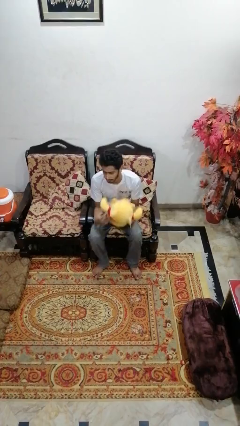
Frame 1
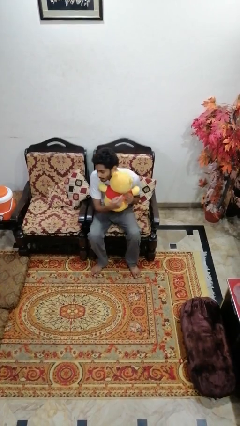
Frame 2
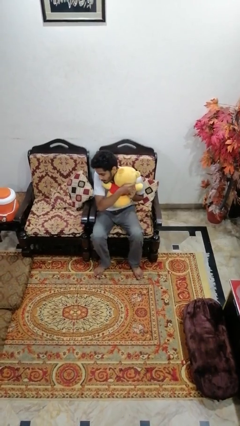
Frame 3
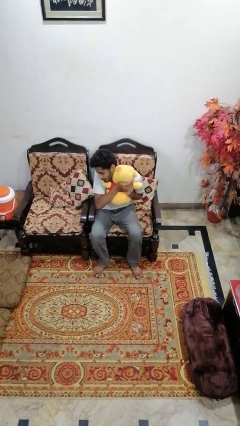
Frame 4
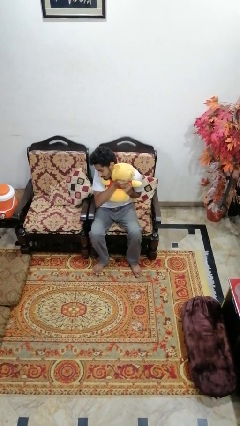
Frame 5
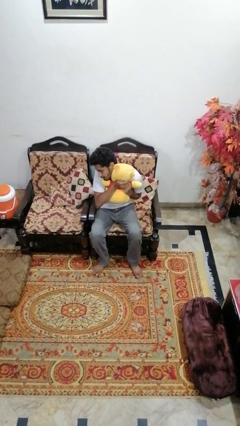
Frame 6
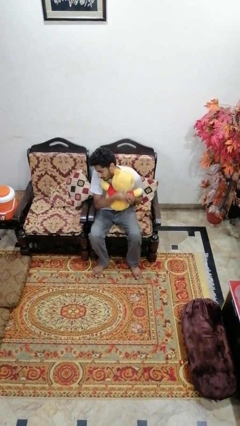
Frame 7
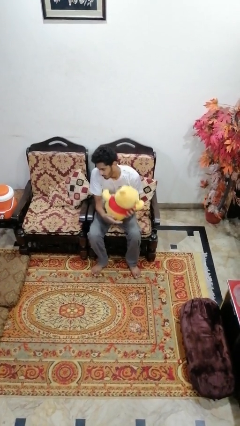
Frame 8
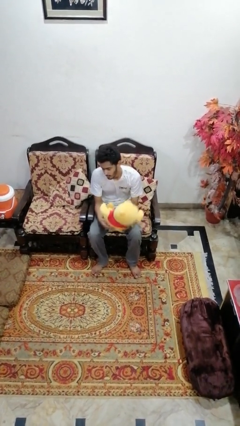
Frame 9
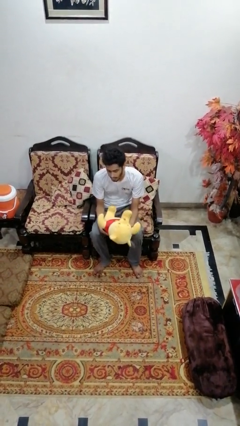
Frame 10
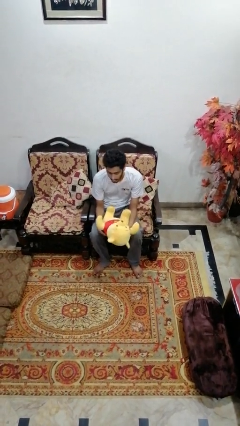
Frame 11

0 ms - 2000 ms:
person hugs stuffed animal

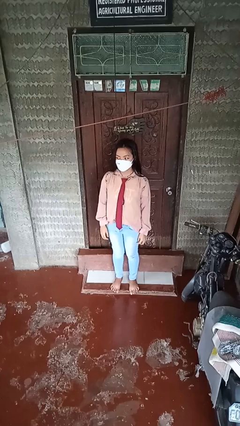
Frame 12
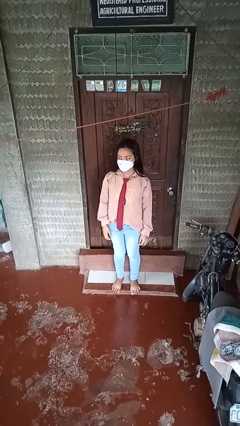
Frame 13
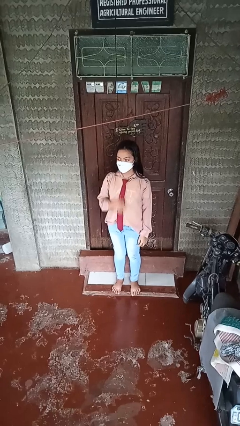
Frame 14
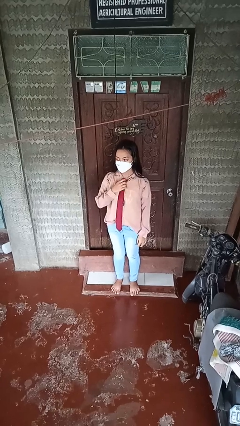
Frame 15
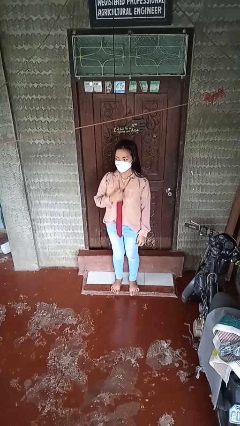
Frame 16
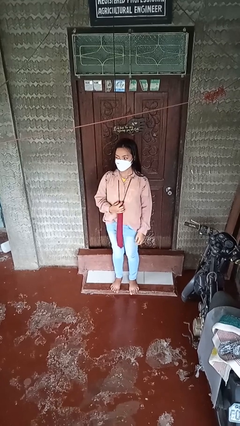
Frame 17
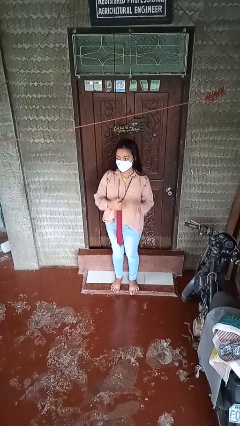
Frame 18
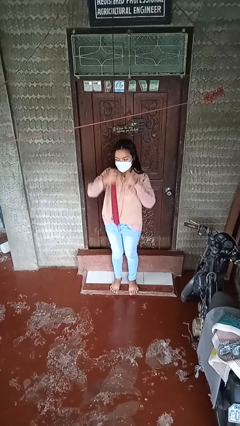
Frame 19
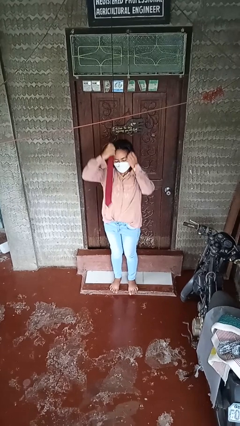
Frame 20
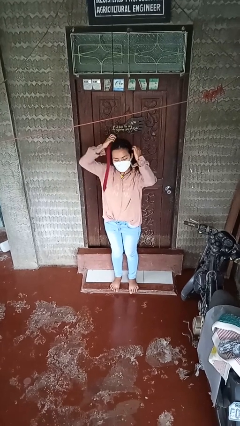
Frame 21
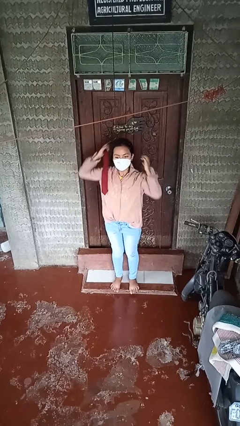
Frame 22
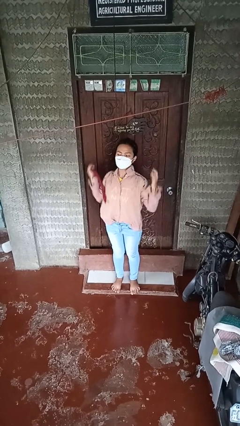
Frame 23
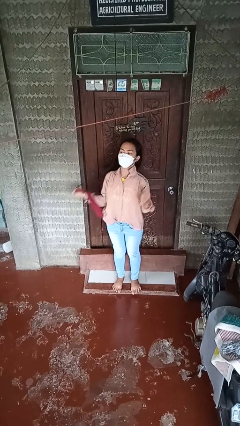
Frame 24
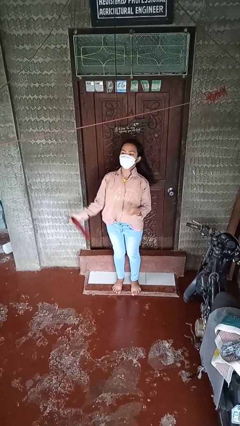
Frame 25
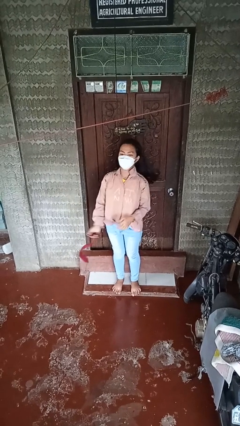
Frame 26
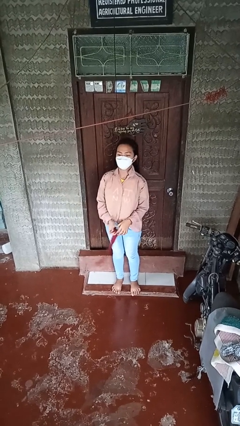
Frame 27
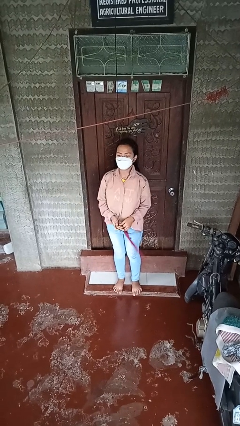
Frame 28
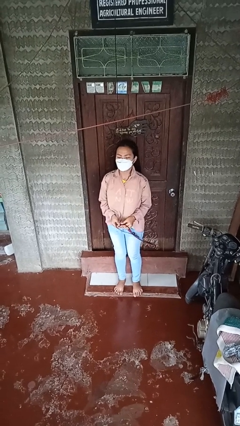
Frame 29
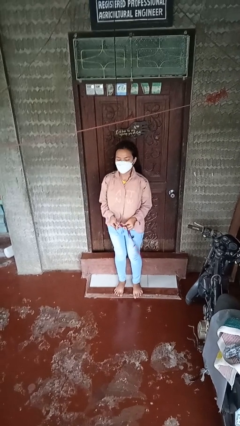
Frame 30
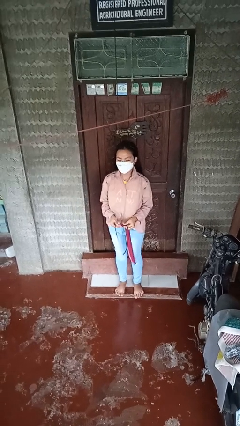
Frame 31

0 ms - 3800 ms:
person takes off necktie

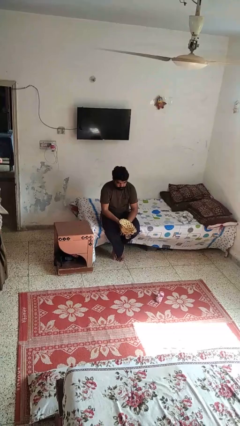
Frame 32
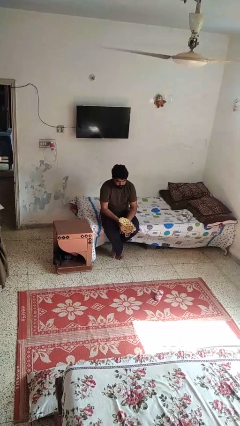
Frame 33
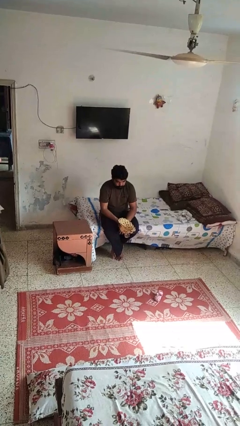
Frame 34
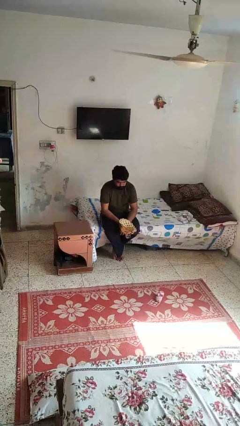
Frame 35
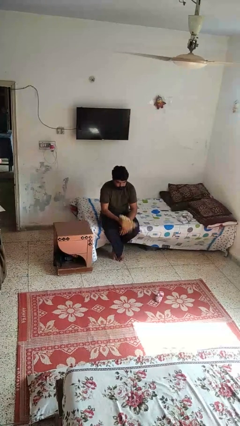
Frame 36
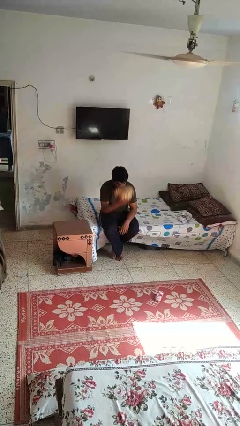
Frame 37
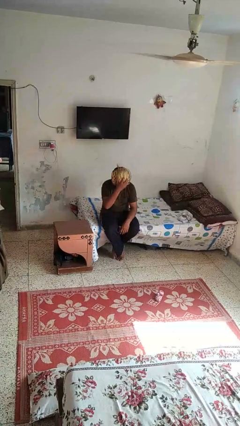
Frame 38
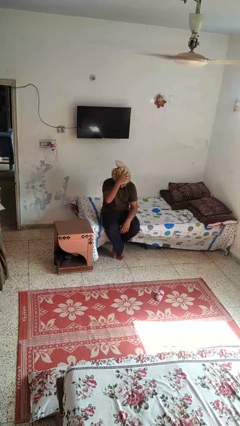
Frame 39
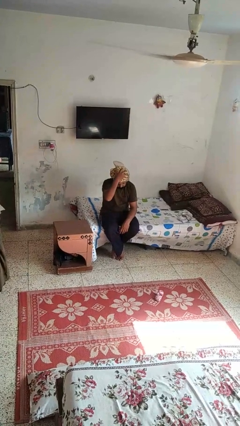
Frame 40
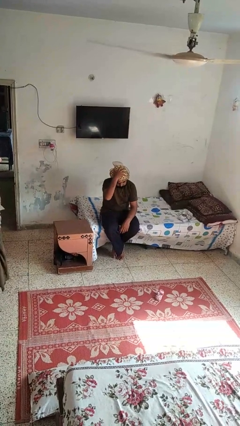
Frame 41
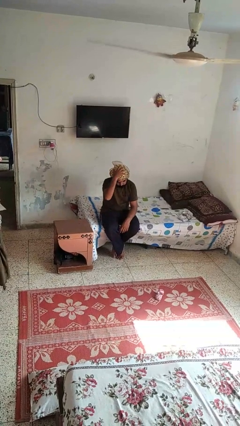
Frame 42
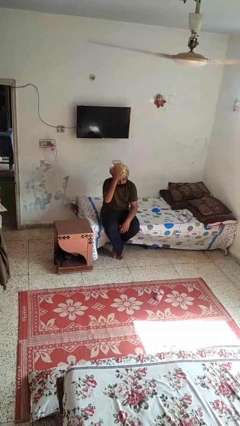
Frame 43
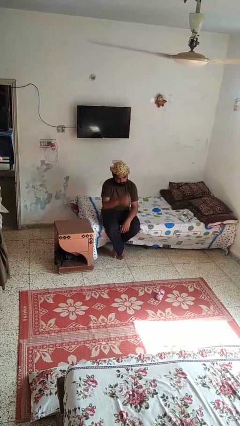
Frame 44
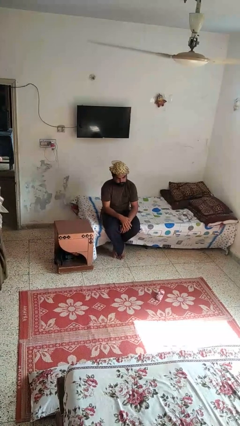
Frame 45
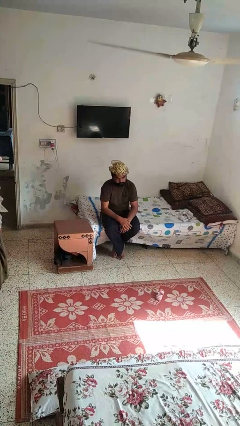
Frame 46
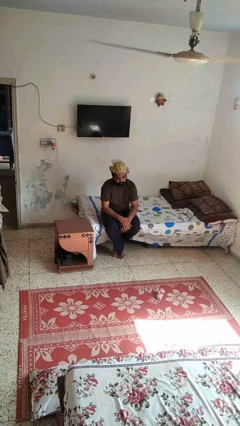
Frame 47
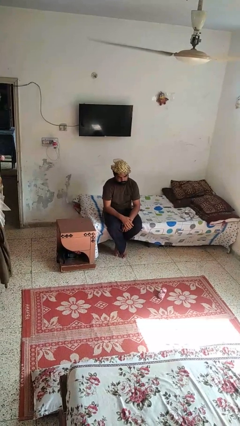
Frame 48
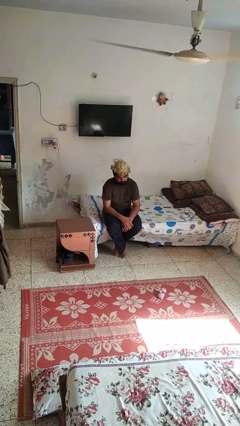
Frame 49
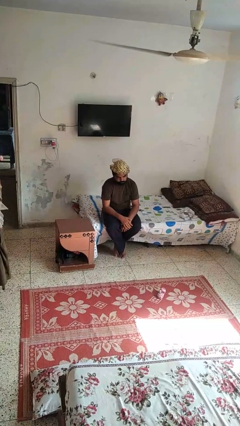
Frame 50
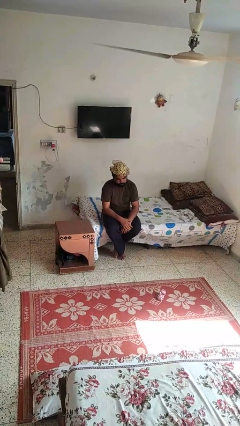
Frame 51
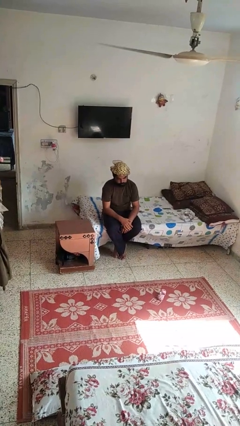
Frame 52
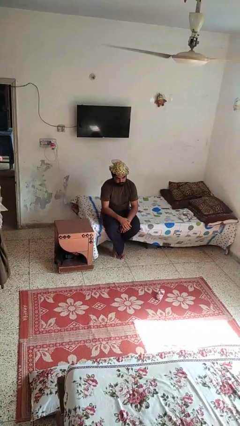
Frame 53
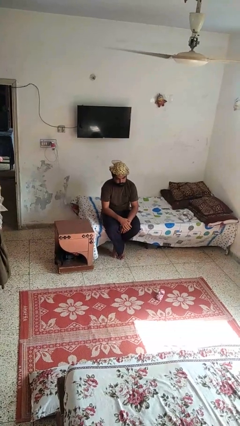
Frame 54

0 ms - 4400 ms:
person puts on hat

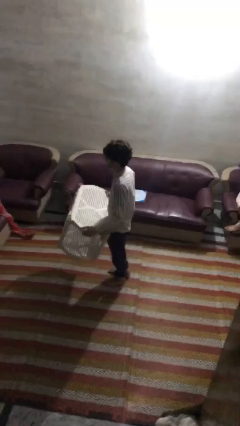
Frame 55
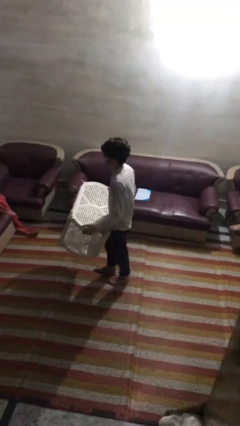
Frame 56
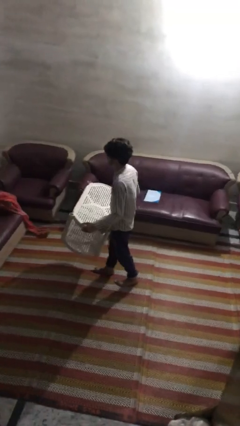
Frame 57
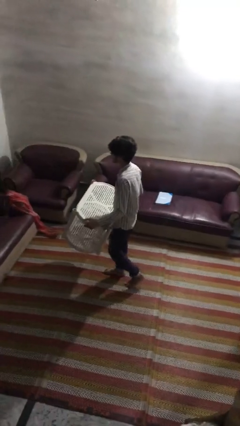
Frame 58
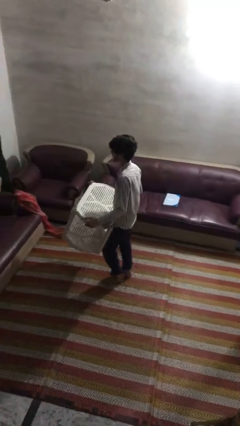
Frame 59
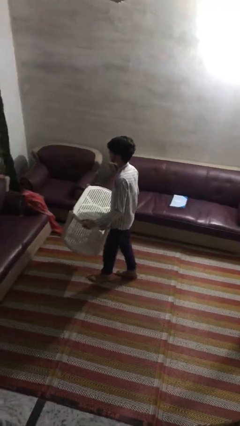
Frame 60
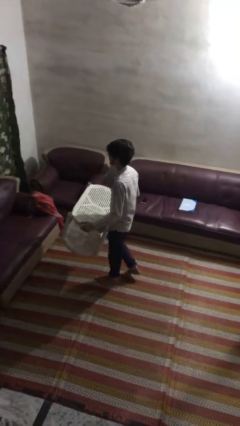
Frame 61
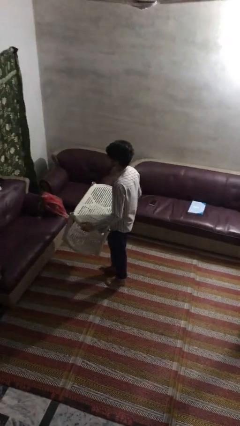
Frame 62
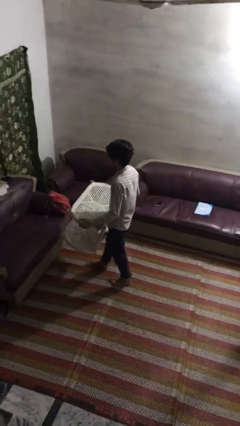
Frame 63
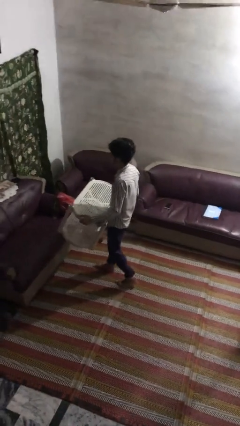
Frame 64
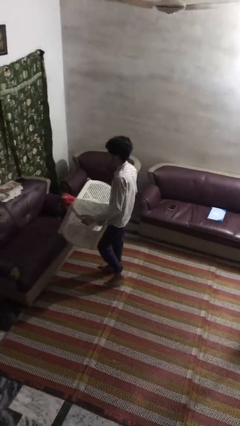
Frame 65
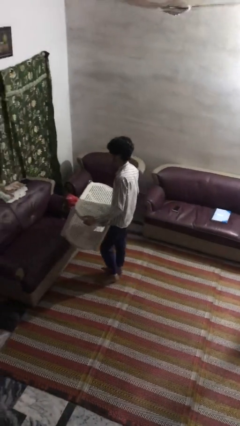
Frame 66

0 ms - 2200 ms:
person carries furniture

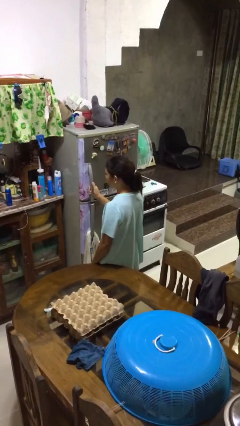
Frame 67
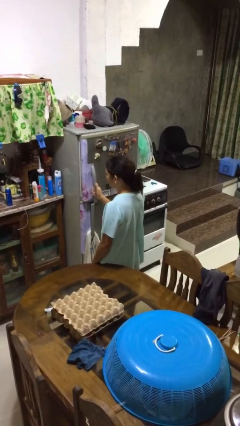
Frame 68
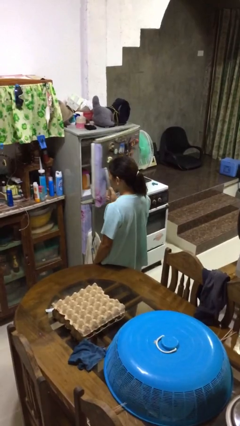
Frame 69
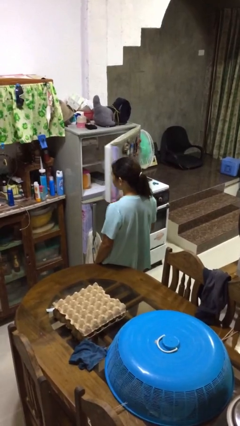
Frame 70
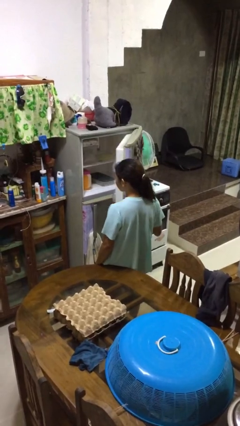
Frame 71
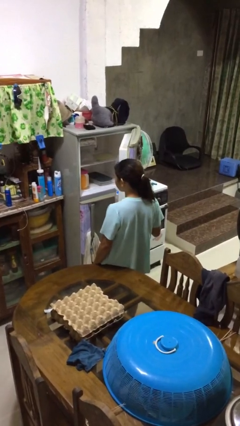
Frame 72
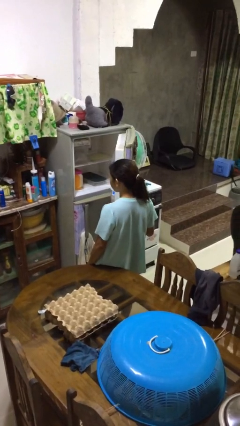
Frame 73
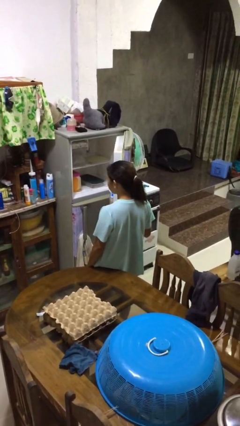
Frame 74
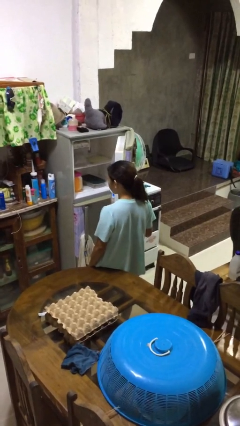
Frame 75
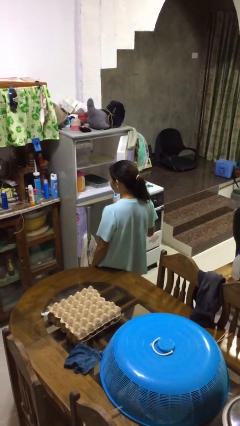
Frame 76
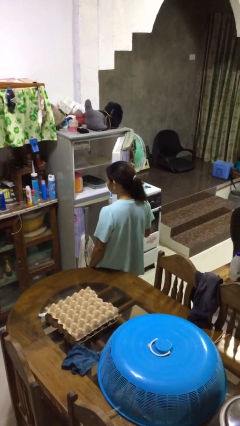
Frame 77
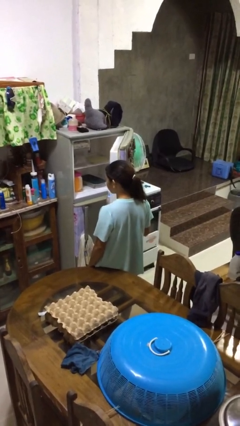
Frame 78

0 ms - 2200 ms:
person opens refrigerator

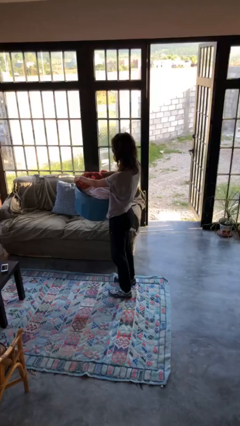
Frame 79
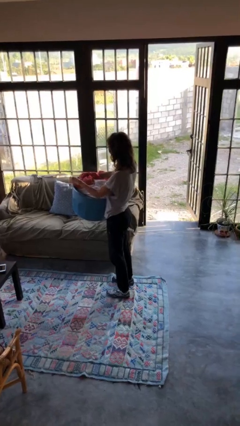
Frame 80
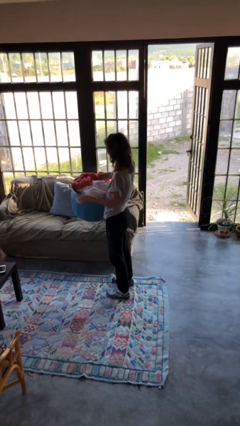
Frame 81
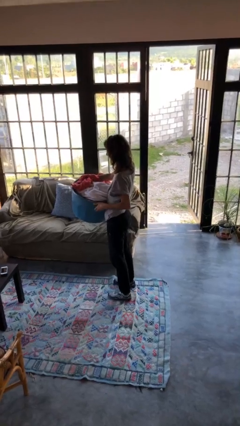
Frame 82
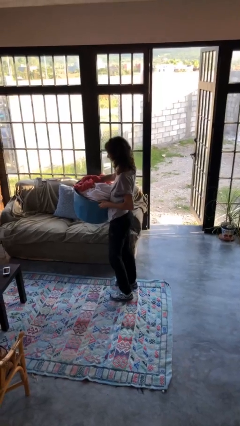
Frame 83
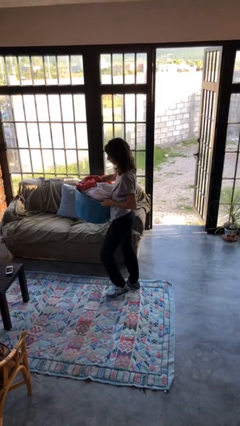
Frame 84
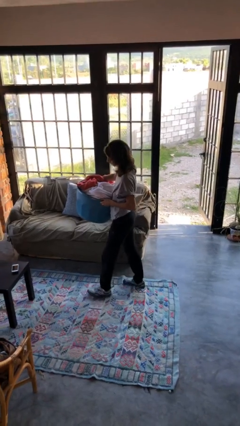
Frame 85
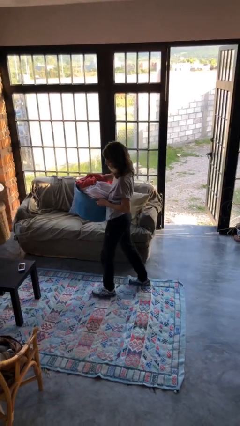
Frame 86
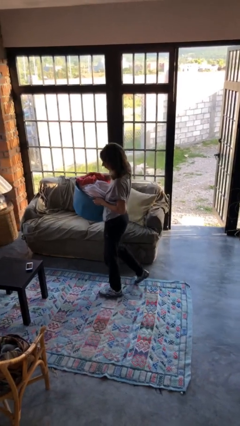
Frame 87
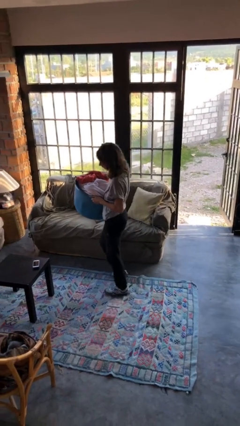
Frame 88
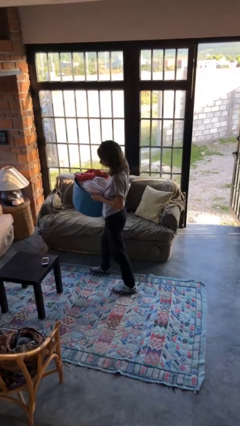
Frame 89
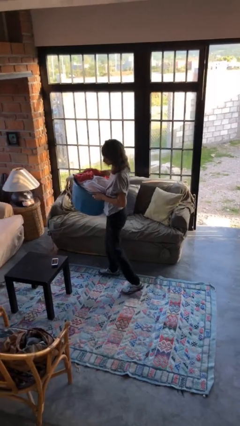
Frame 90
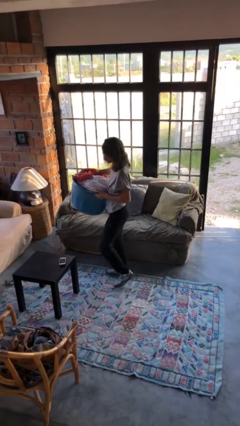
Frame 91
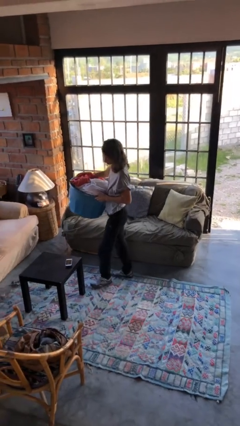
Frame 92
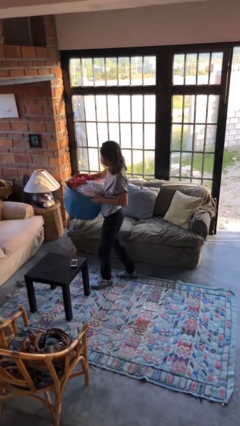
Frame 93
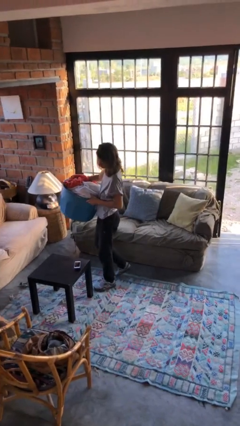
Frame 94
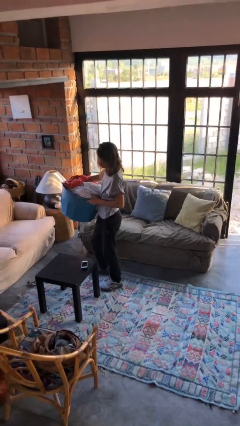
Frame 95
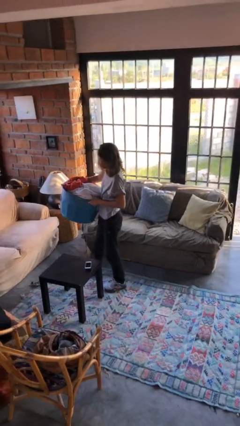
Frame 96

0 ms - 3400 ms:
person carries laundry basket
